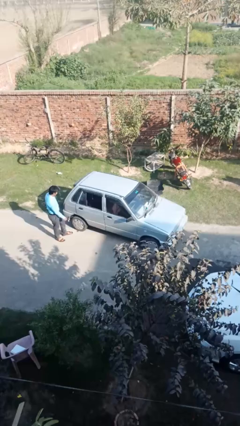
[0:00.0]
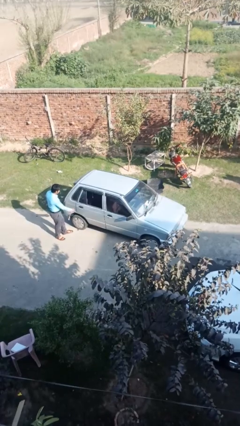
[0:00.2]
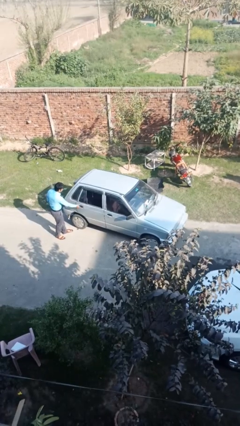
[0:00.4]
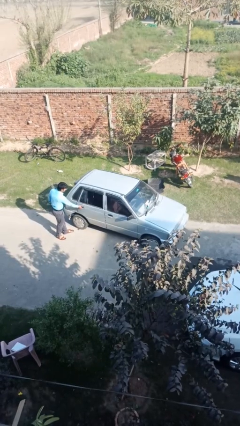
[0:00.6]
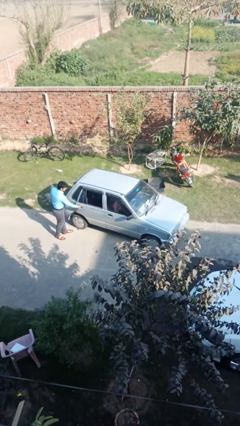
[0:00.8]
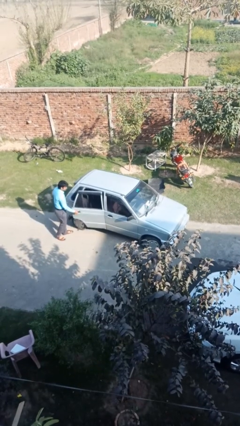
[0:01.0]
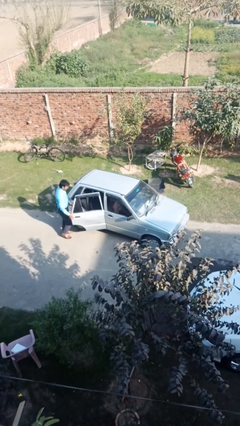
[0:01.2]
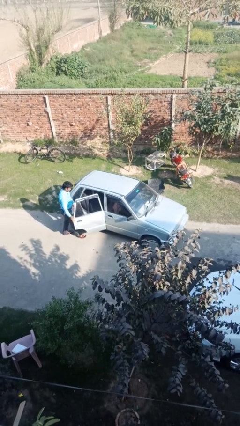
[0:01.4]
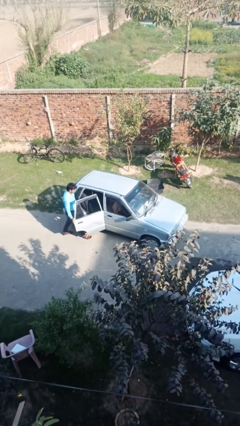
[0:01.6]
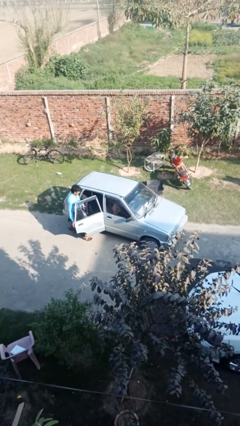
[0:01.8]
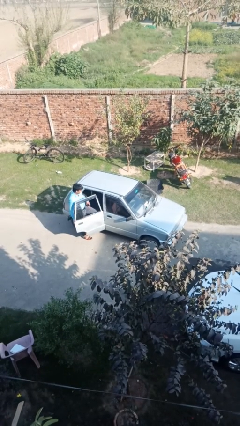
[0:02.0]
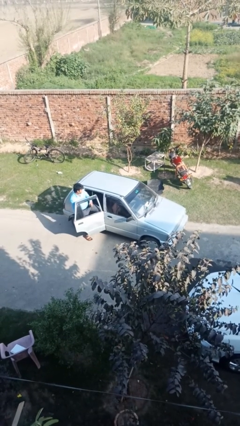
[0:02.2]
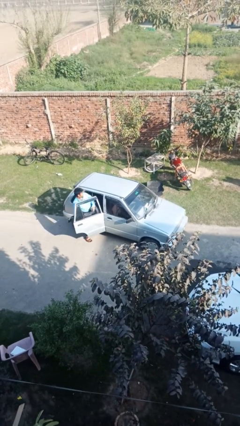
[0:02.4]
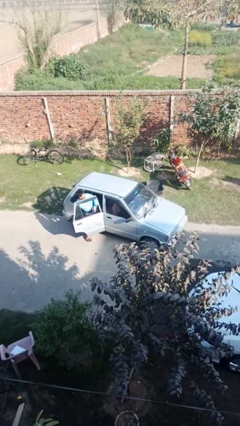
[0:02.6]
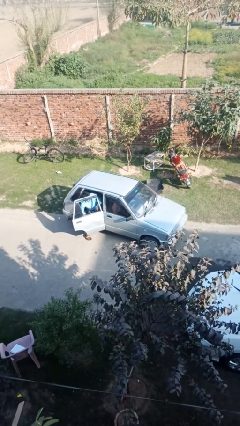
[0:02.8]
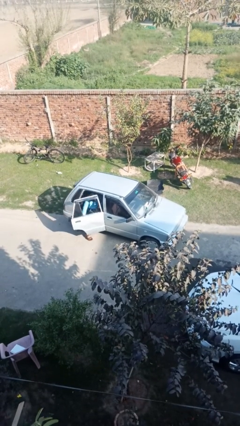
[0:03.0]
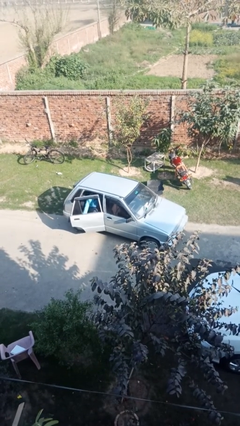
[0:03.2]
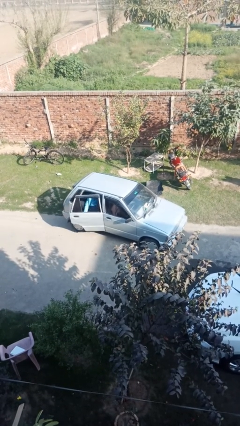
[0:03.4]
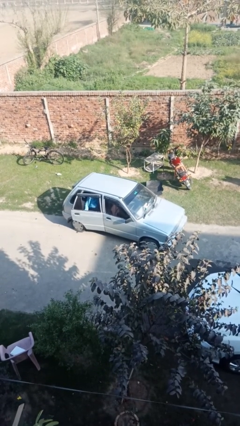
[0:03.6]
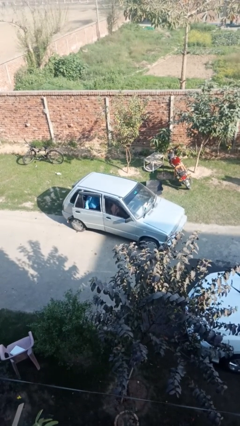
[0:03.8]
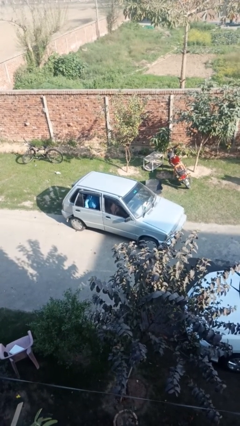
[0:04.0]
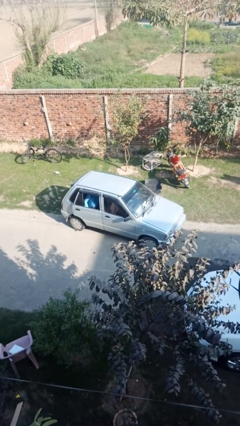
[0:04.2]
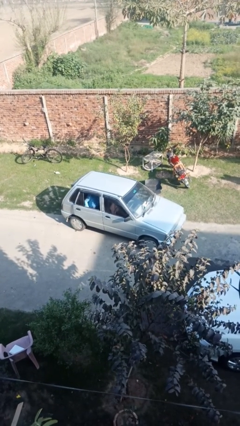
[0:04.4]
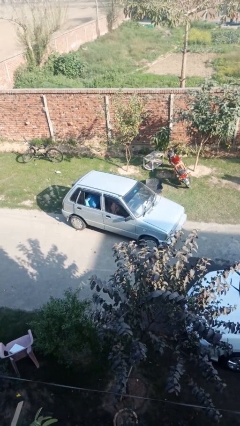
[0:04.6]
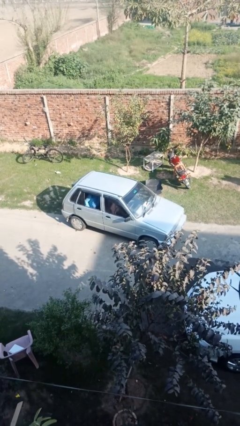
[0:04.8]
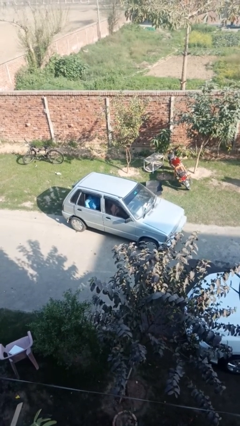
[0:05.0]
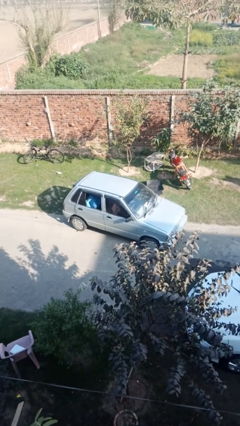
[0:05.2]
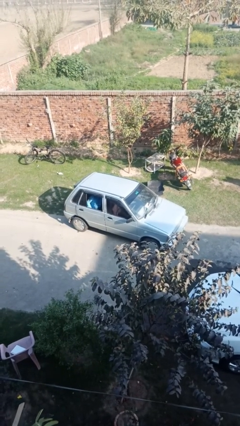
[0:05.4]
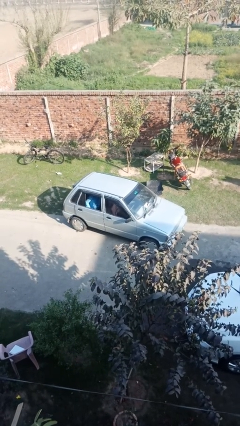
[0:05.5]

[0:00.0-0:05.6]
car picks up person

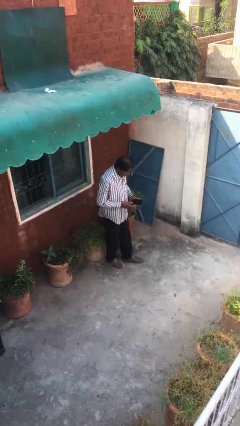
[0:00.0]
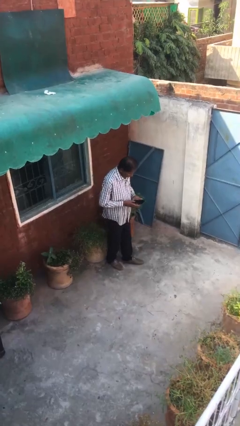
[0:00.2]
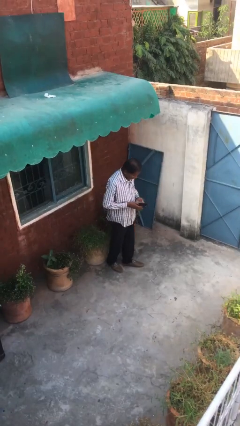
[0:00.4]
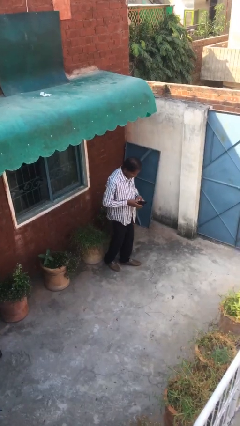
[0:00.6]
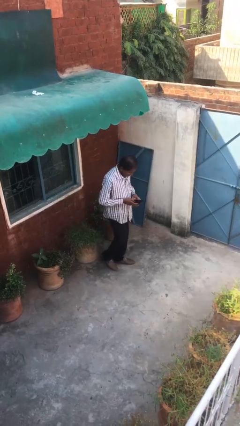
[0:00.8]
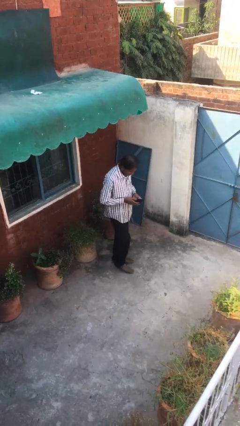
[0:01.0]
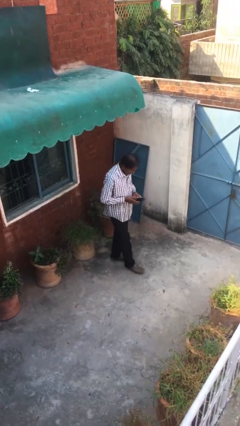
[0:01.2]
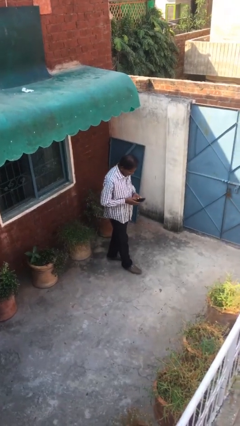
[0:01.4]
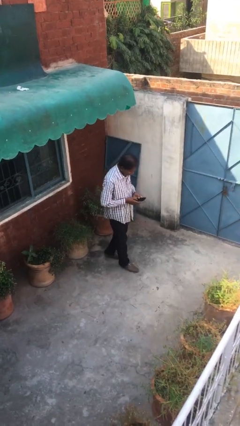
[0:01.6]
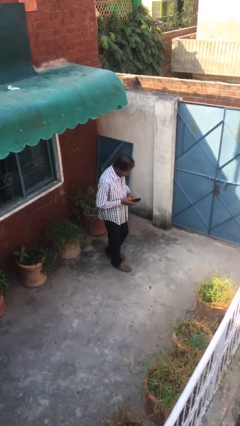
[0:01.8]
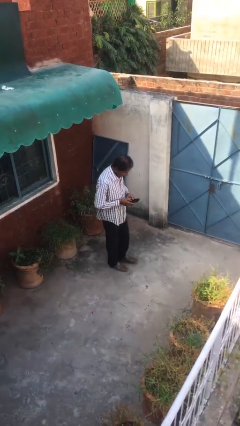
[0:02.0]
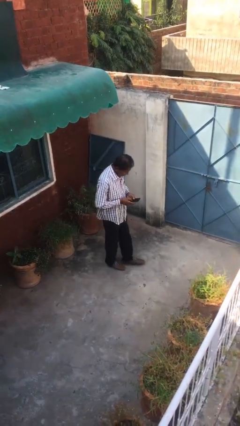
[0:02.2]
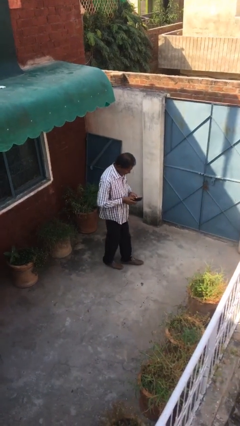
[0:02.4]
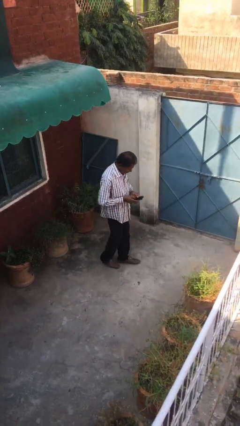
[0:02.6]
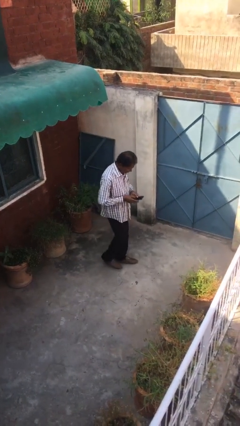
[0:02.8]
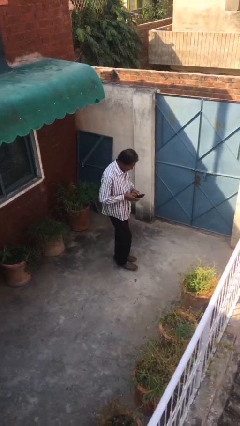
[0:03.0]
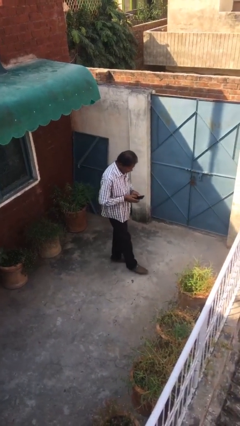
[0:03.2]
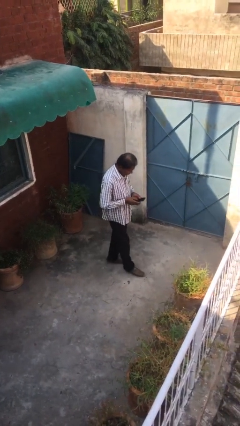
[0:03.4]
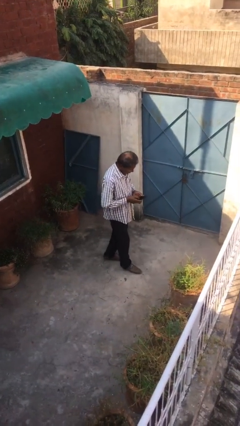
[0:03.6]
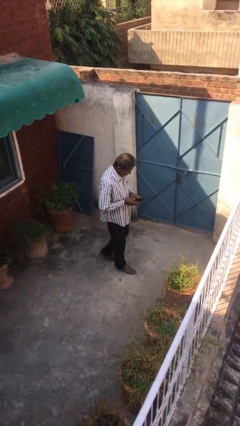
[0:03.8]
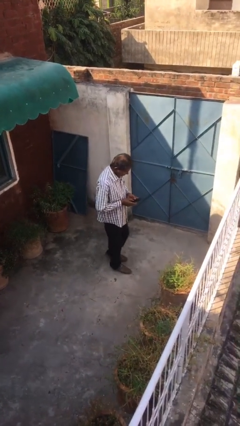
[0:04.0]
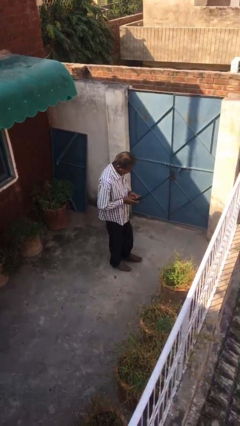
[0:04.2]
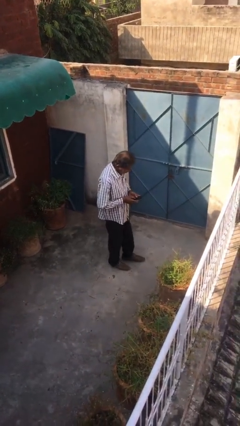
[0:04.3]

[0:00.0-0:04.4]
person texts on phone

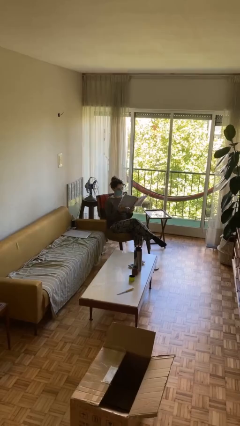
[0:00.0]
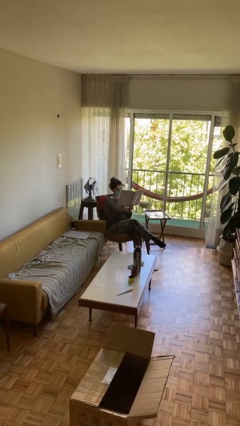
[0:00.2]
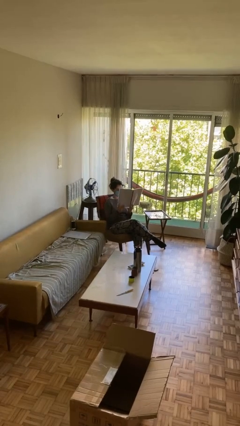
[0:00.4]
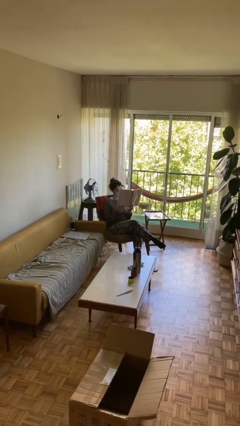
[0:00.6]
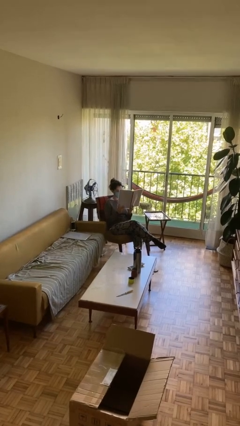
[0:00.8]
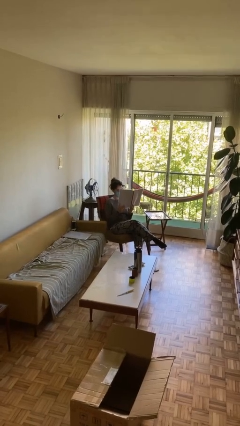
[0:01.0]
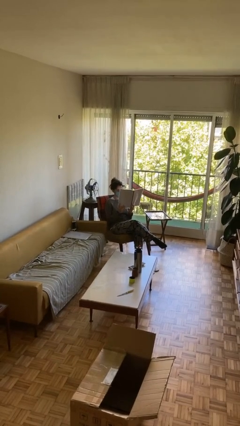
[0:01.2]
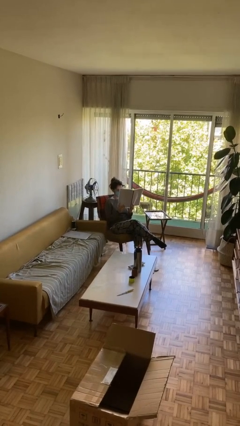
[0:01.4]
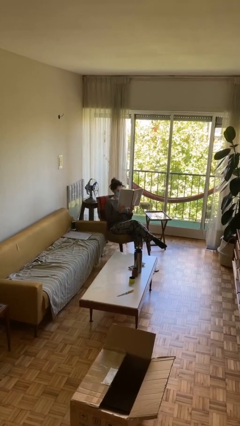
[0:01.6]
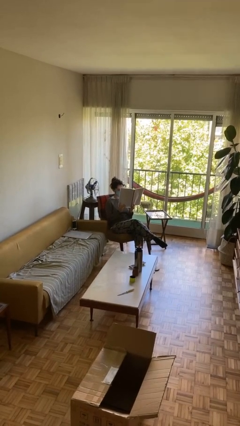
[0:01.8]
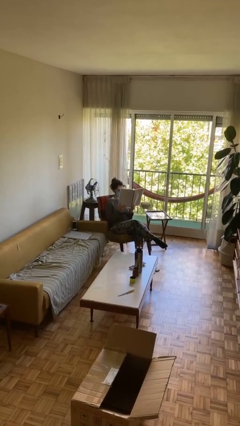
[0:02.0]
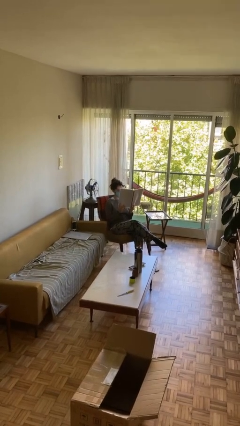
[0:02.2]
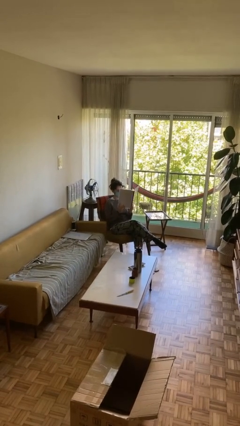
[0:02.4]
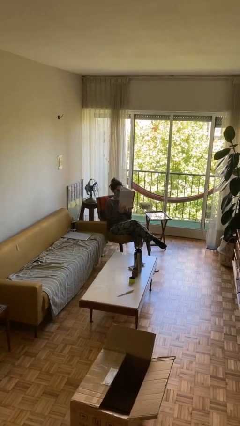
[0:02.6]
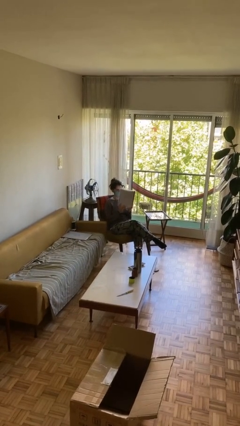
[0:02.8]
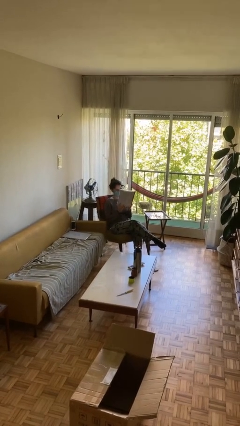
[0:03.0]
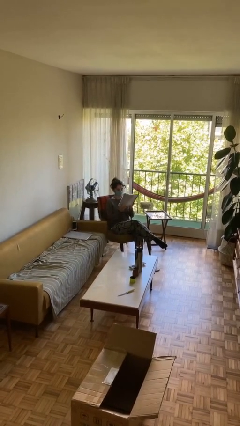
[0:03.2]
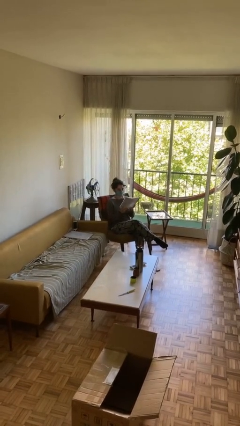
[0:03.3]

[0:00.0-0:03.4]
person reads document

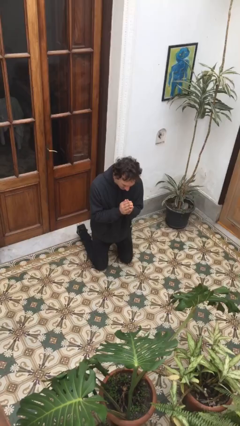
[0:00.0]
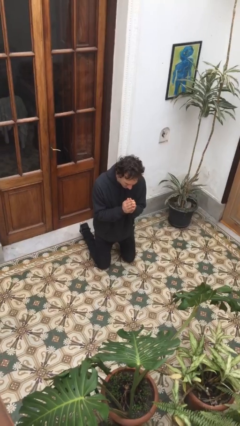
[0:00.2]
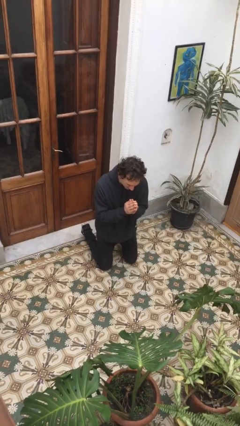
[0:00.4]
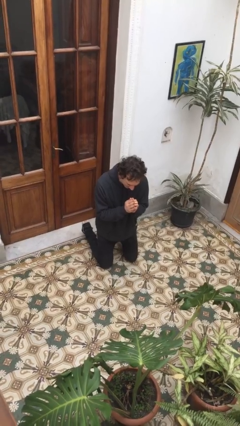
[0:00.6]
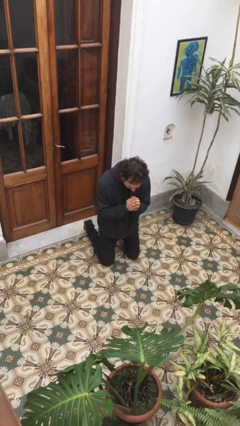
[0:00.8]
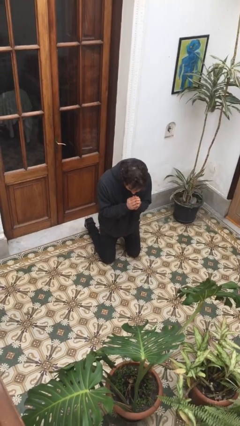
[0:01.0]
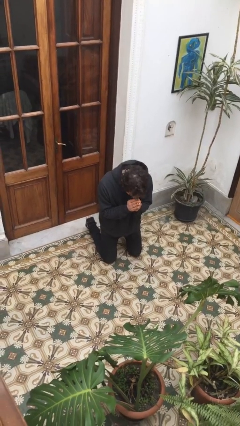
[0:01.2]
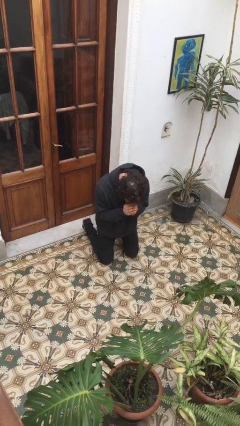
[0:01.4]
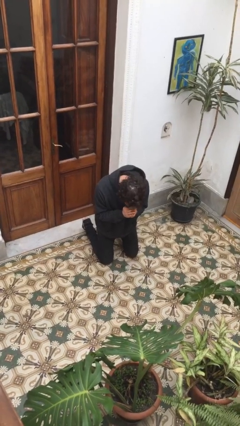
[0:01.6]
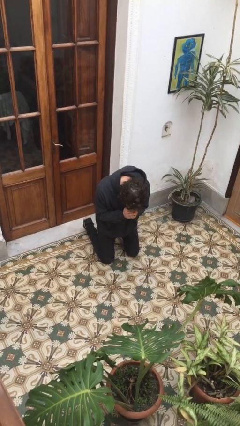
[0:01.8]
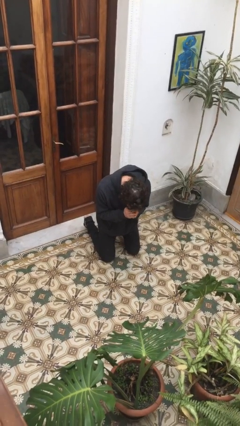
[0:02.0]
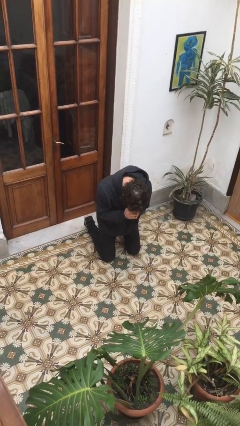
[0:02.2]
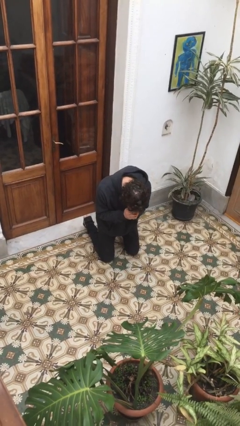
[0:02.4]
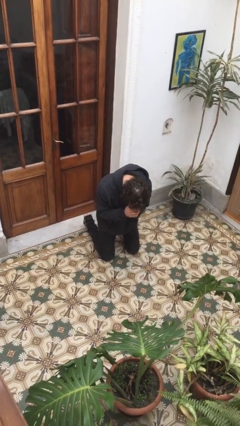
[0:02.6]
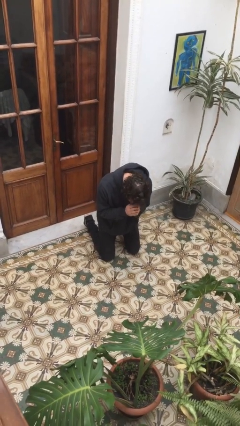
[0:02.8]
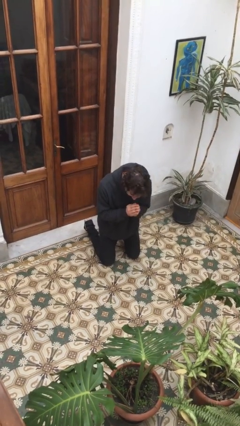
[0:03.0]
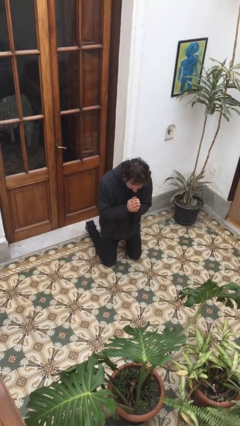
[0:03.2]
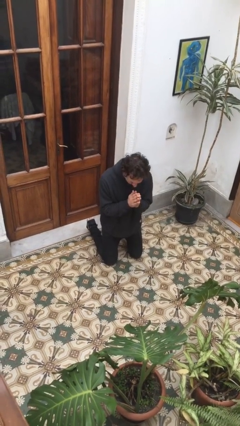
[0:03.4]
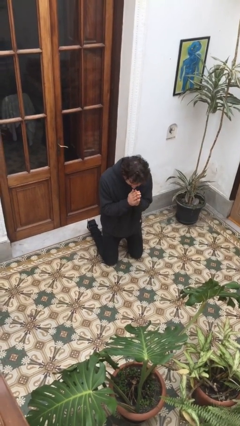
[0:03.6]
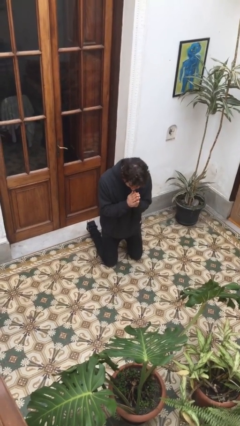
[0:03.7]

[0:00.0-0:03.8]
person prays

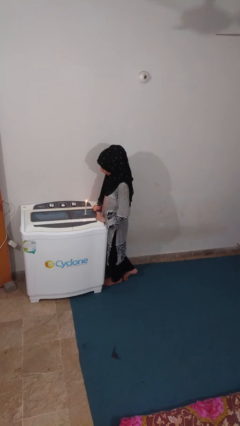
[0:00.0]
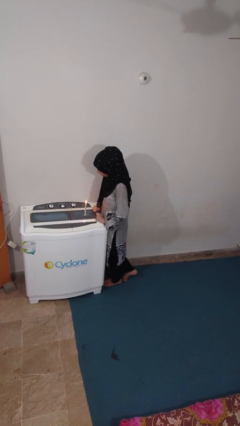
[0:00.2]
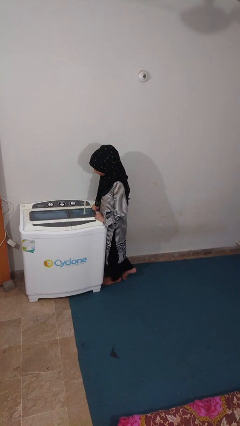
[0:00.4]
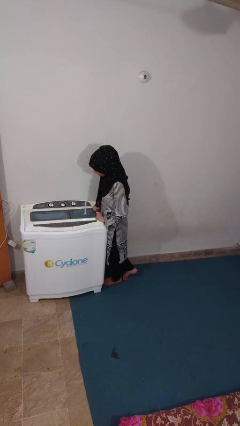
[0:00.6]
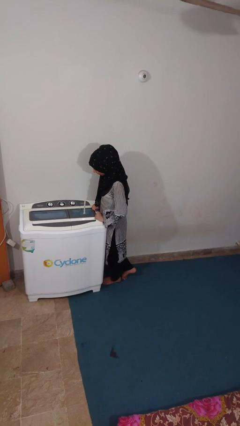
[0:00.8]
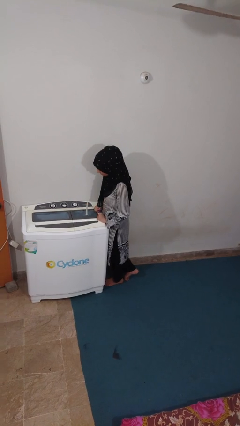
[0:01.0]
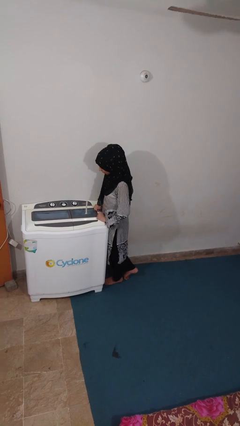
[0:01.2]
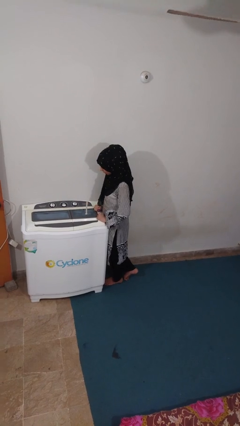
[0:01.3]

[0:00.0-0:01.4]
person extinguishes candle
